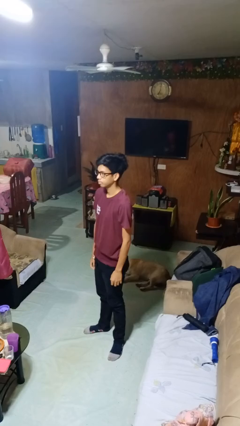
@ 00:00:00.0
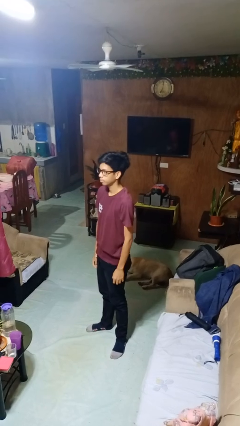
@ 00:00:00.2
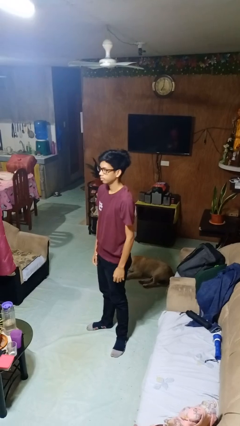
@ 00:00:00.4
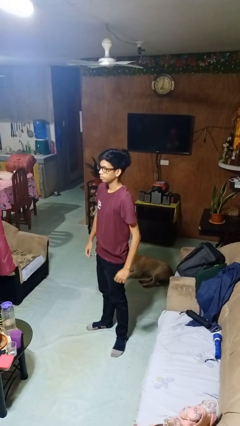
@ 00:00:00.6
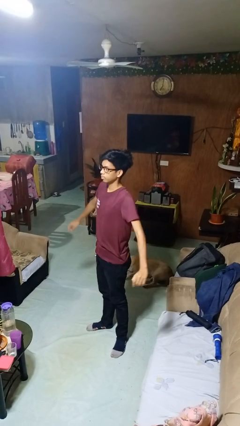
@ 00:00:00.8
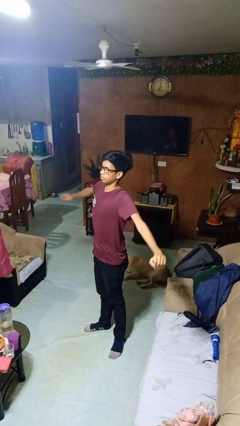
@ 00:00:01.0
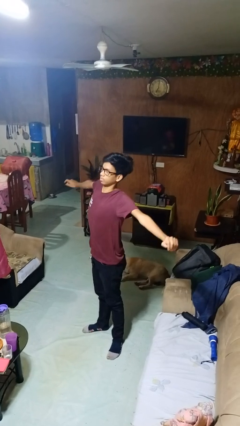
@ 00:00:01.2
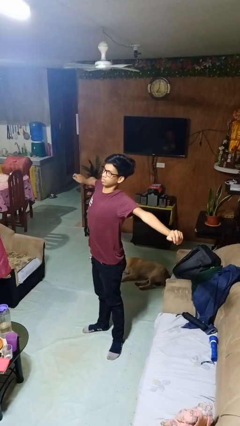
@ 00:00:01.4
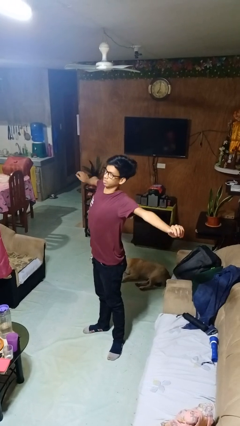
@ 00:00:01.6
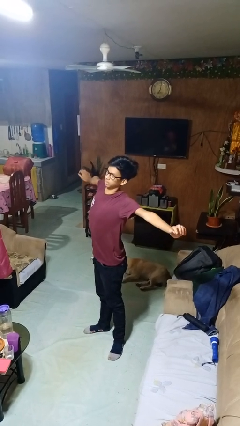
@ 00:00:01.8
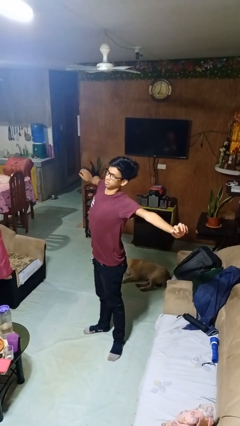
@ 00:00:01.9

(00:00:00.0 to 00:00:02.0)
person stretches arms to side

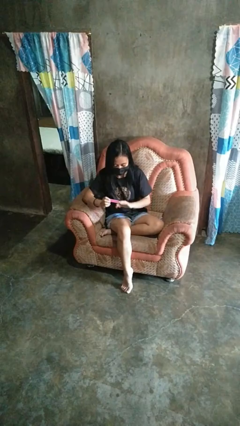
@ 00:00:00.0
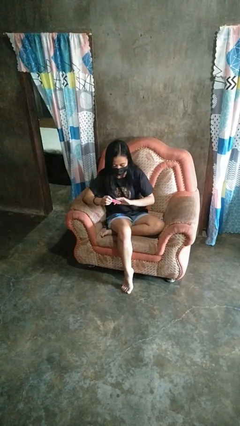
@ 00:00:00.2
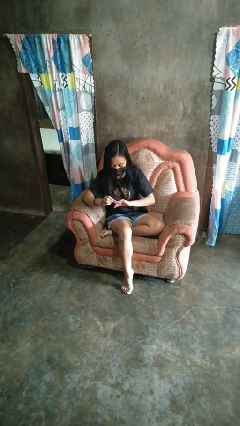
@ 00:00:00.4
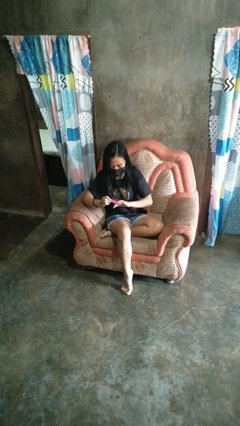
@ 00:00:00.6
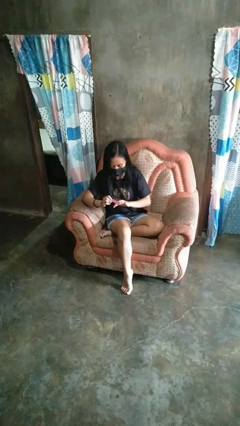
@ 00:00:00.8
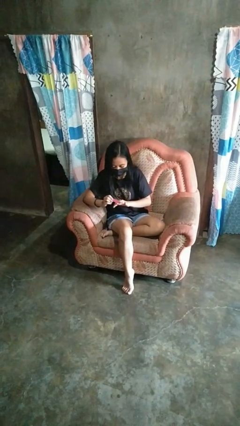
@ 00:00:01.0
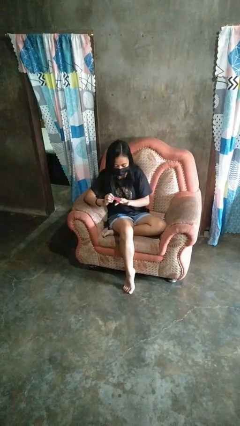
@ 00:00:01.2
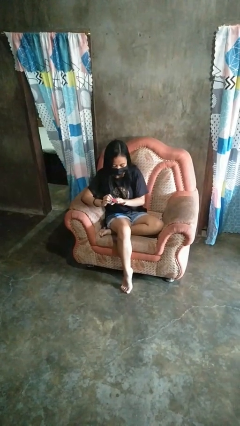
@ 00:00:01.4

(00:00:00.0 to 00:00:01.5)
person files fingernails

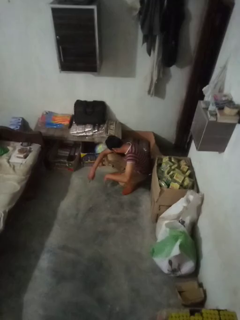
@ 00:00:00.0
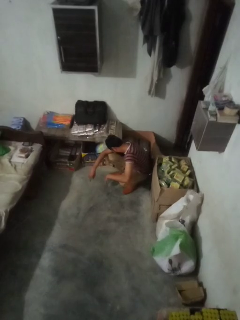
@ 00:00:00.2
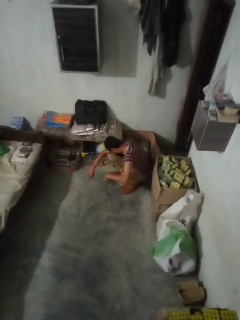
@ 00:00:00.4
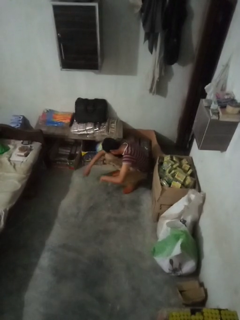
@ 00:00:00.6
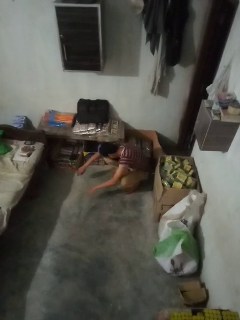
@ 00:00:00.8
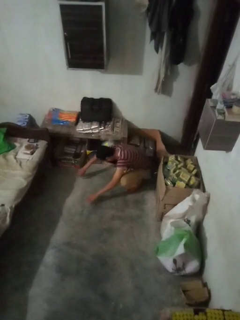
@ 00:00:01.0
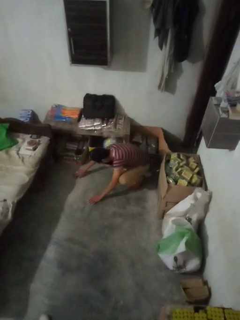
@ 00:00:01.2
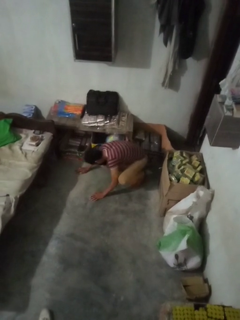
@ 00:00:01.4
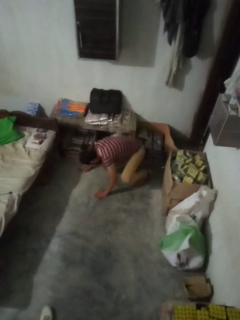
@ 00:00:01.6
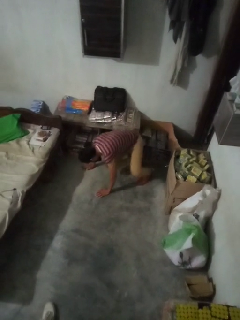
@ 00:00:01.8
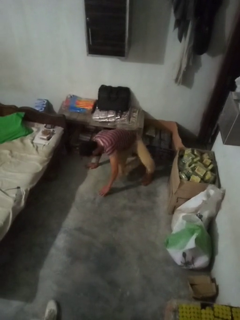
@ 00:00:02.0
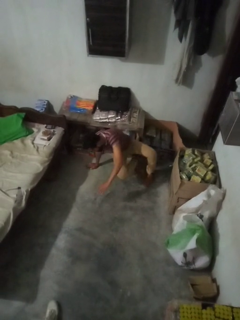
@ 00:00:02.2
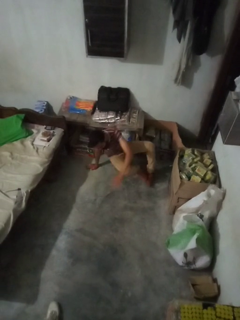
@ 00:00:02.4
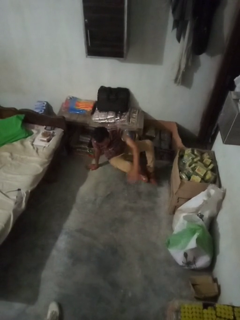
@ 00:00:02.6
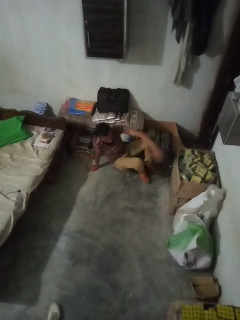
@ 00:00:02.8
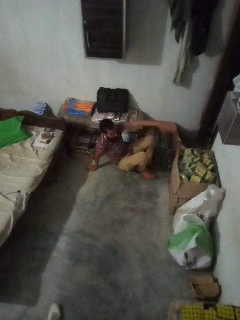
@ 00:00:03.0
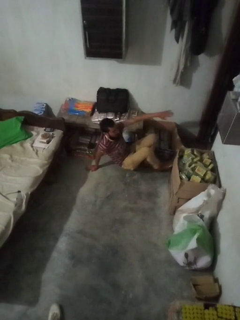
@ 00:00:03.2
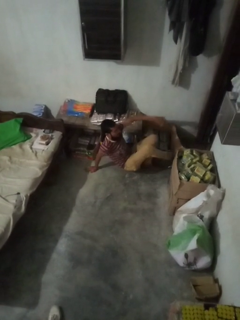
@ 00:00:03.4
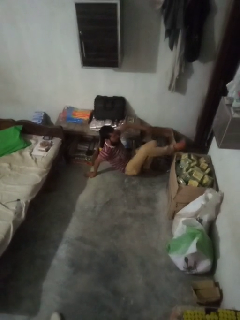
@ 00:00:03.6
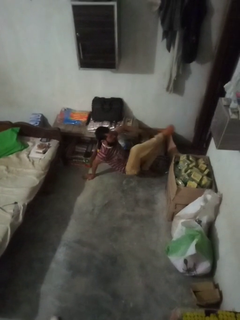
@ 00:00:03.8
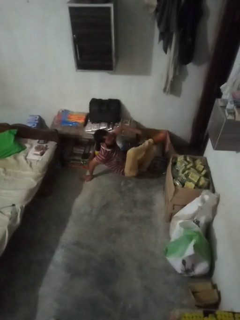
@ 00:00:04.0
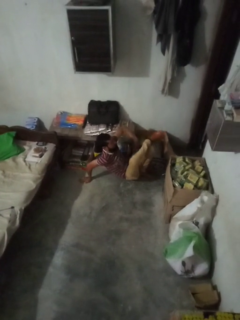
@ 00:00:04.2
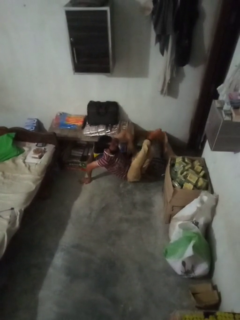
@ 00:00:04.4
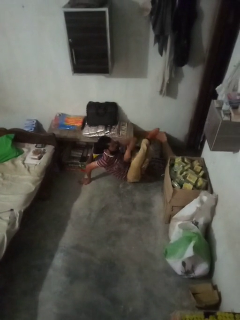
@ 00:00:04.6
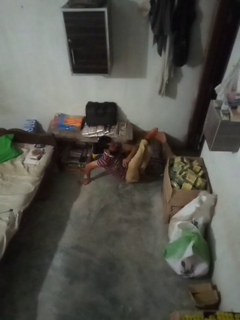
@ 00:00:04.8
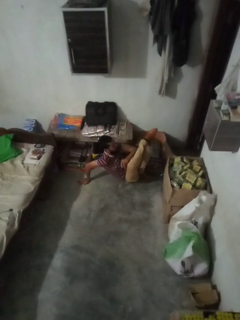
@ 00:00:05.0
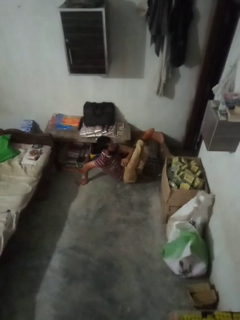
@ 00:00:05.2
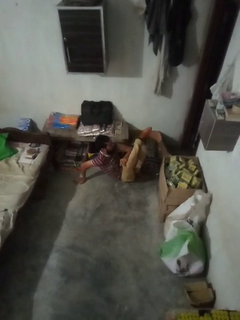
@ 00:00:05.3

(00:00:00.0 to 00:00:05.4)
person lies down on floor

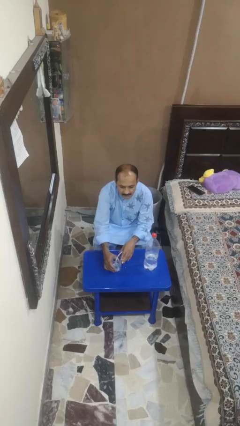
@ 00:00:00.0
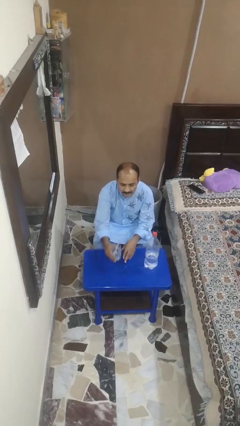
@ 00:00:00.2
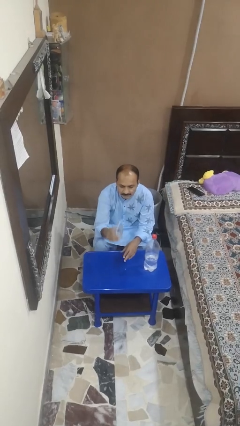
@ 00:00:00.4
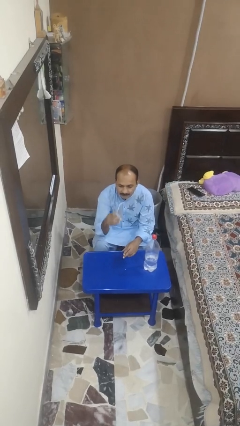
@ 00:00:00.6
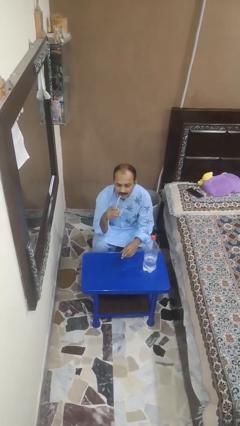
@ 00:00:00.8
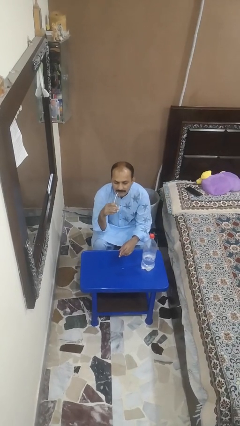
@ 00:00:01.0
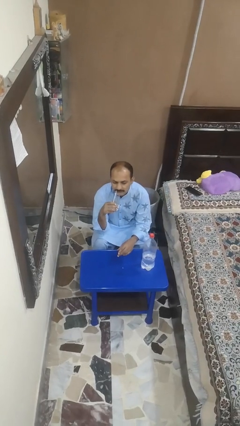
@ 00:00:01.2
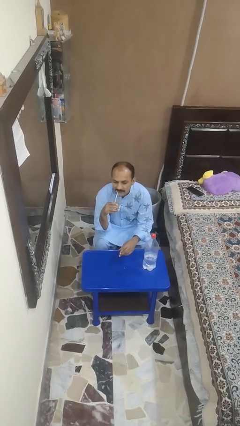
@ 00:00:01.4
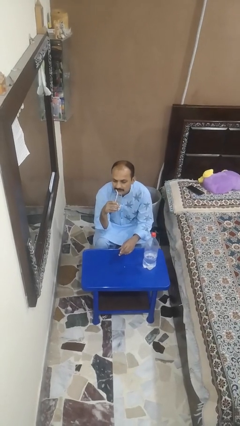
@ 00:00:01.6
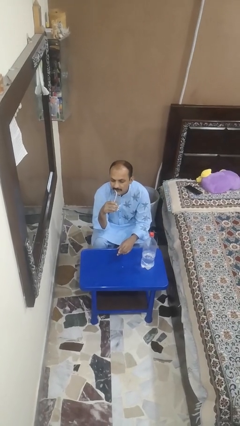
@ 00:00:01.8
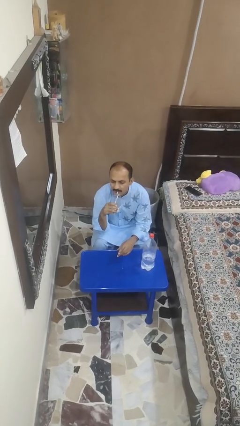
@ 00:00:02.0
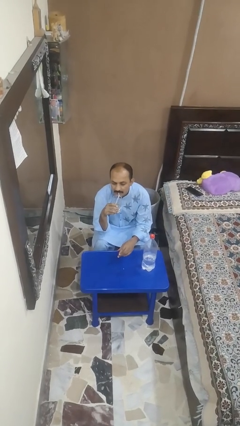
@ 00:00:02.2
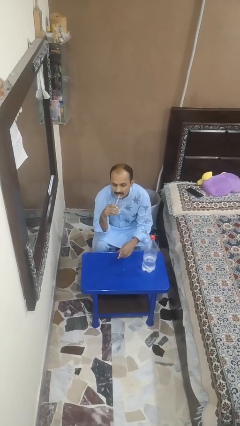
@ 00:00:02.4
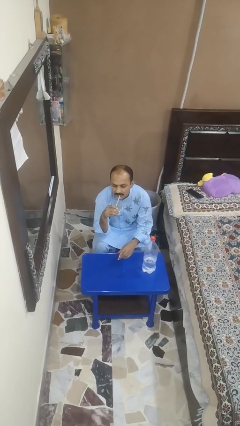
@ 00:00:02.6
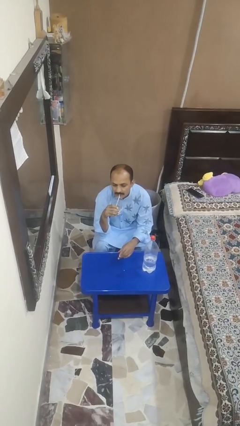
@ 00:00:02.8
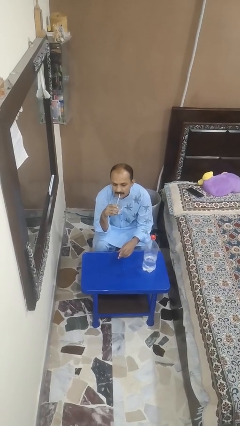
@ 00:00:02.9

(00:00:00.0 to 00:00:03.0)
person drinks from straw

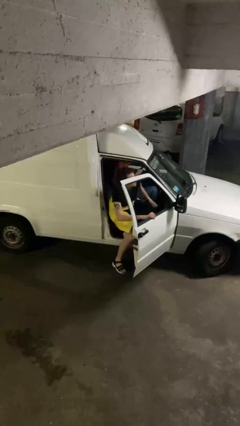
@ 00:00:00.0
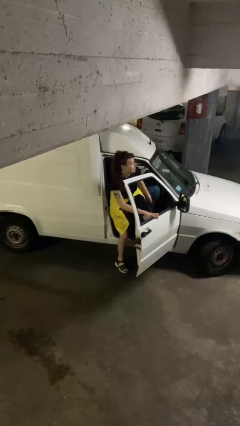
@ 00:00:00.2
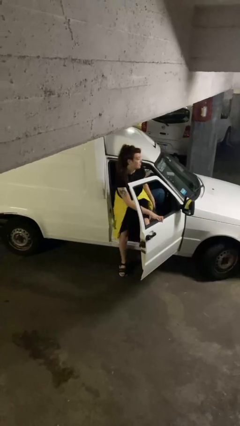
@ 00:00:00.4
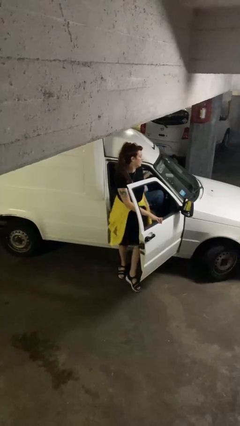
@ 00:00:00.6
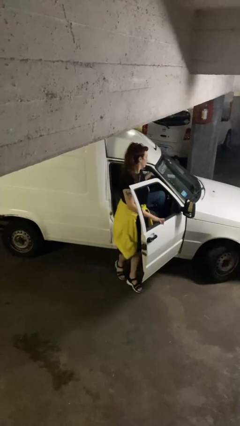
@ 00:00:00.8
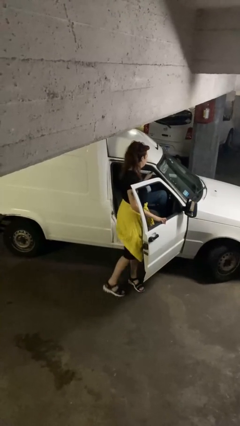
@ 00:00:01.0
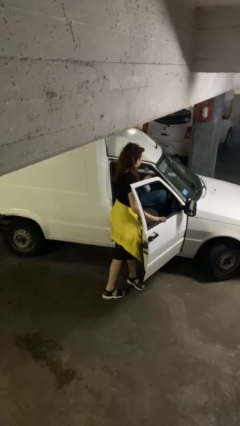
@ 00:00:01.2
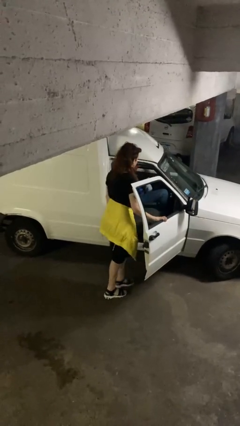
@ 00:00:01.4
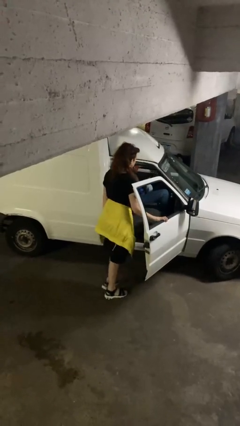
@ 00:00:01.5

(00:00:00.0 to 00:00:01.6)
person exits car

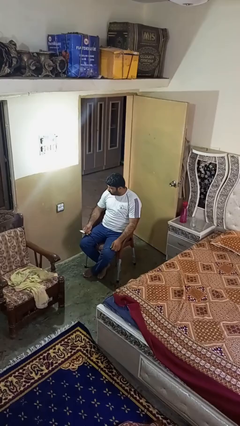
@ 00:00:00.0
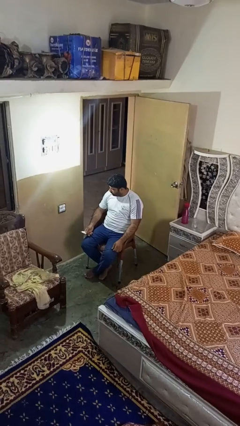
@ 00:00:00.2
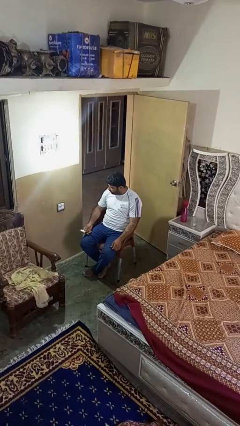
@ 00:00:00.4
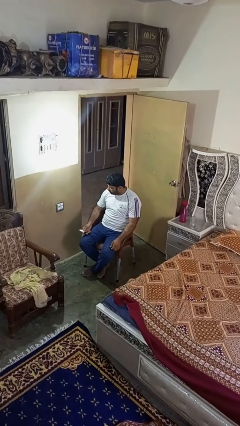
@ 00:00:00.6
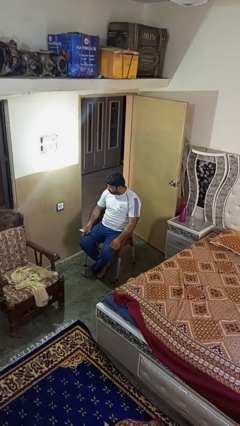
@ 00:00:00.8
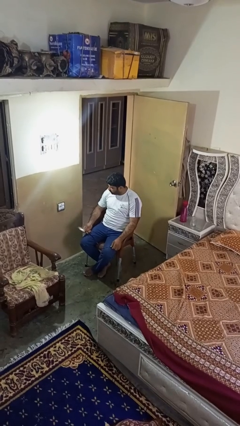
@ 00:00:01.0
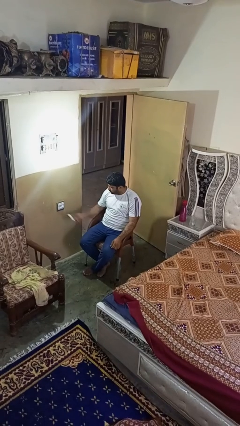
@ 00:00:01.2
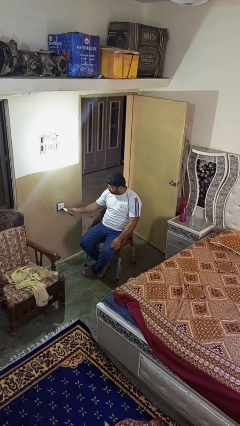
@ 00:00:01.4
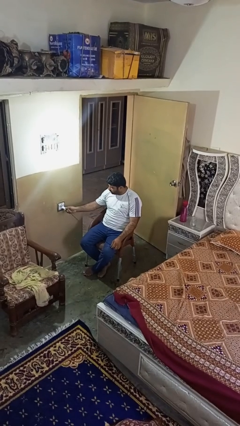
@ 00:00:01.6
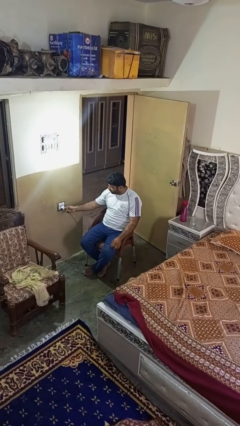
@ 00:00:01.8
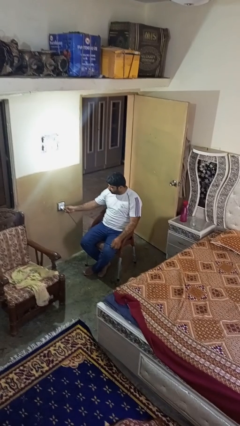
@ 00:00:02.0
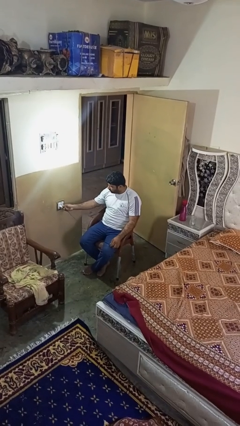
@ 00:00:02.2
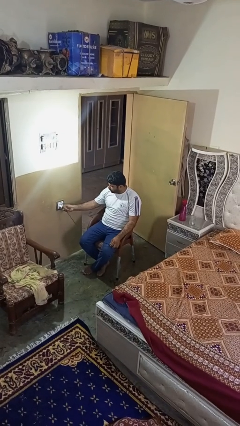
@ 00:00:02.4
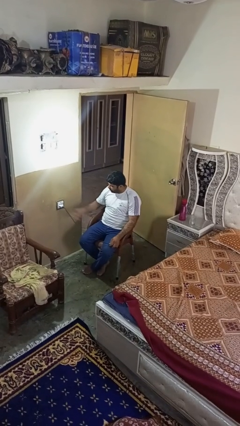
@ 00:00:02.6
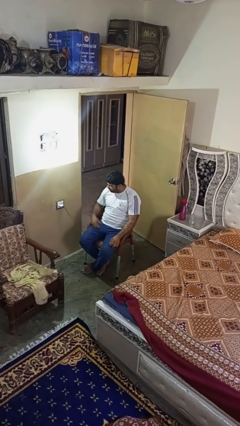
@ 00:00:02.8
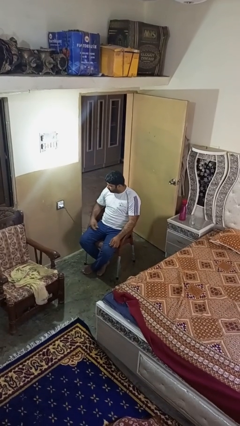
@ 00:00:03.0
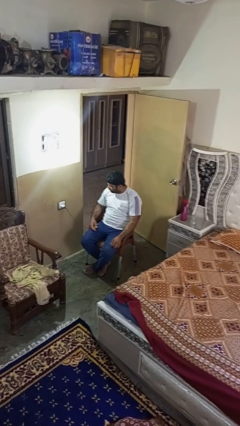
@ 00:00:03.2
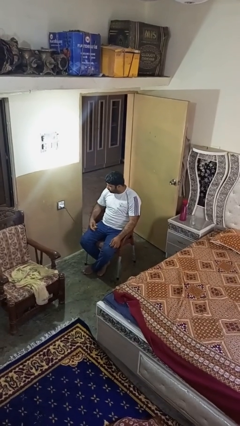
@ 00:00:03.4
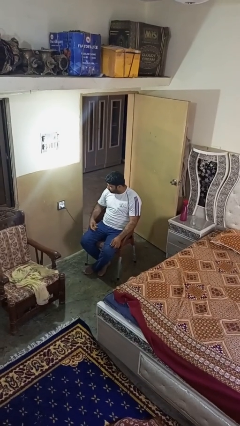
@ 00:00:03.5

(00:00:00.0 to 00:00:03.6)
person plugs into electrical socket

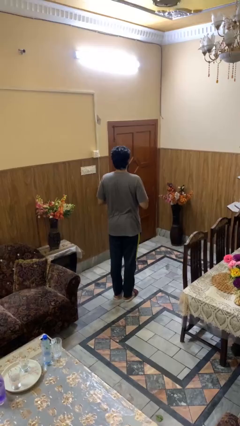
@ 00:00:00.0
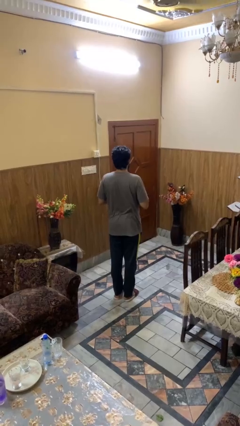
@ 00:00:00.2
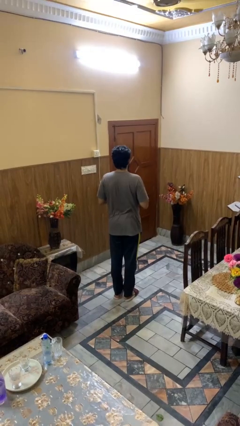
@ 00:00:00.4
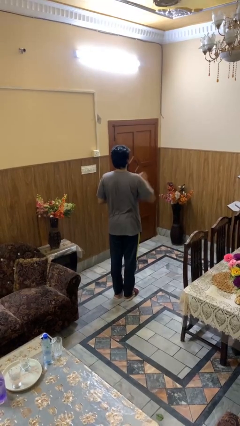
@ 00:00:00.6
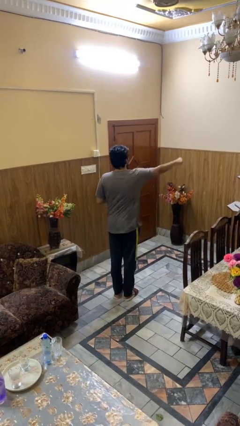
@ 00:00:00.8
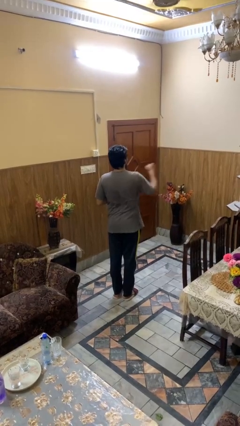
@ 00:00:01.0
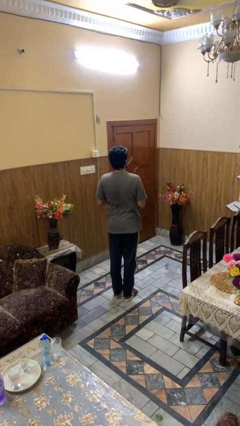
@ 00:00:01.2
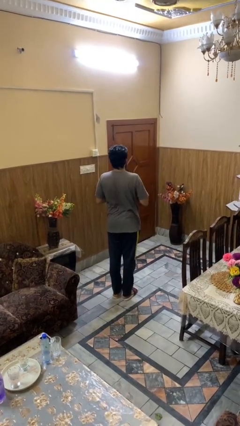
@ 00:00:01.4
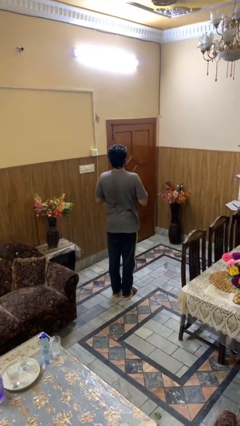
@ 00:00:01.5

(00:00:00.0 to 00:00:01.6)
person punches
